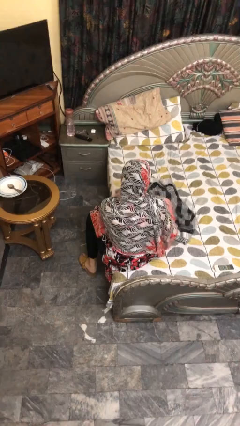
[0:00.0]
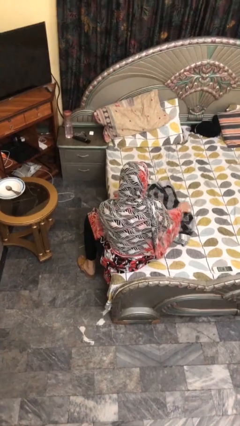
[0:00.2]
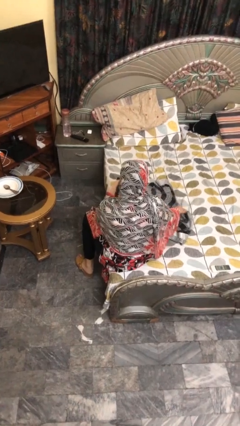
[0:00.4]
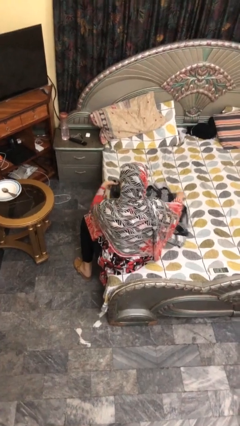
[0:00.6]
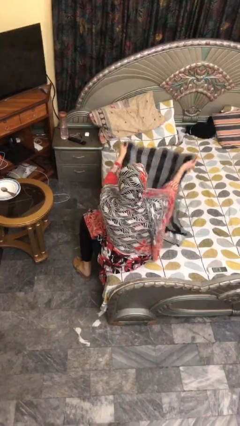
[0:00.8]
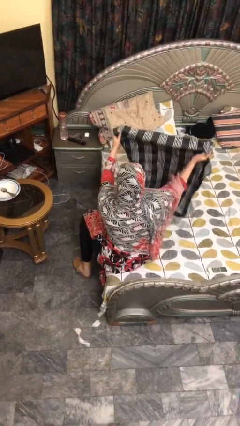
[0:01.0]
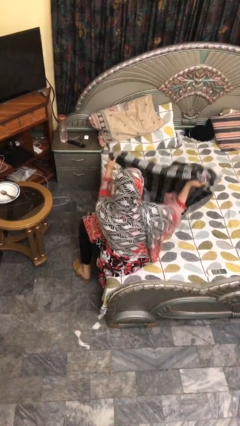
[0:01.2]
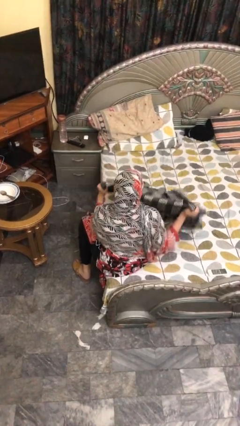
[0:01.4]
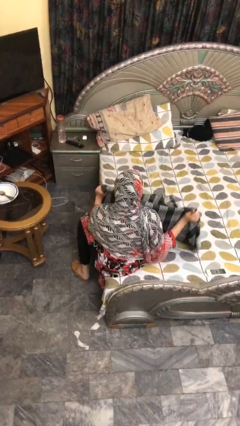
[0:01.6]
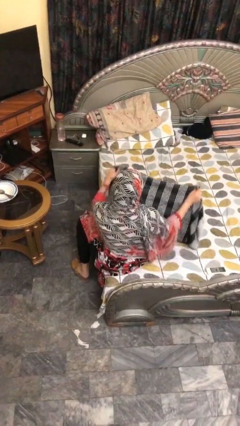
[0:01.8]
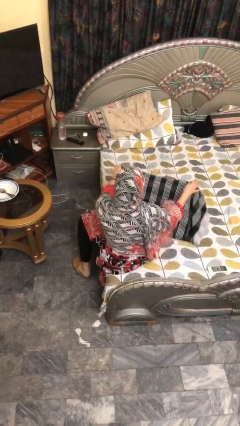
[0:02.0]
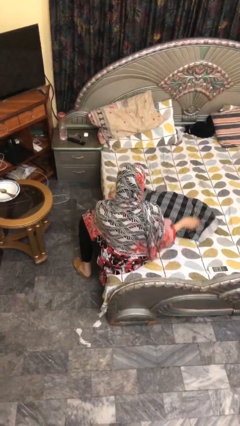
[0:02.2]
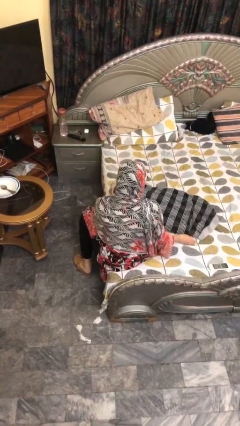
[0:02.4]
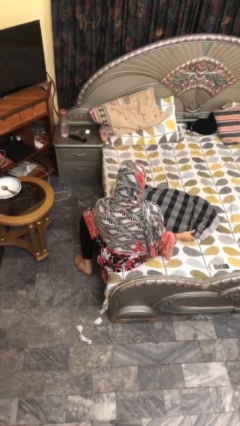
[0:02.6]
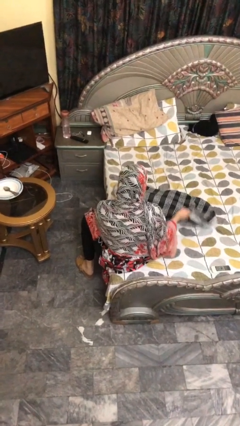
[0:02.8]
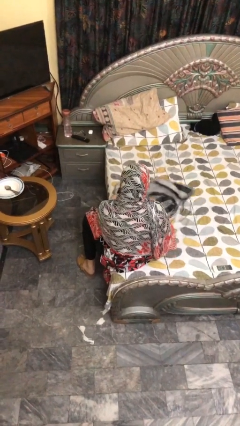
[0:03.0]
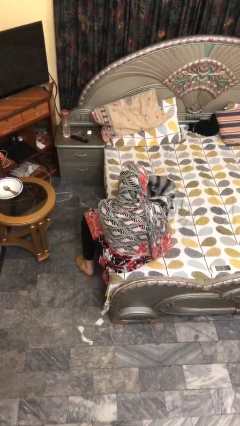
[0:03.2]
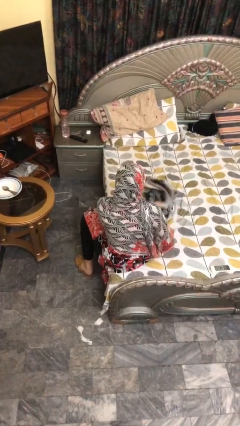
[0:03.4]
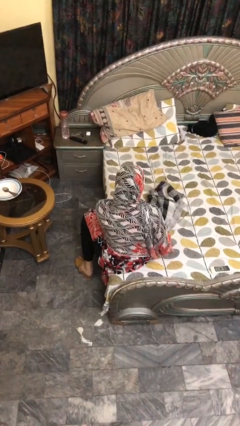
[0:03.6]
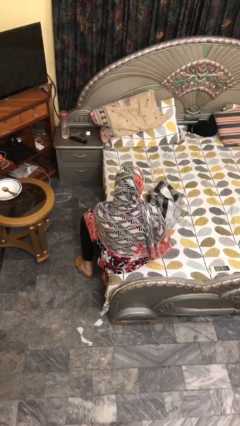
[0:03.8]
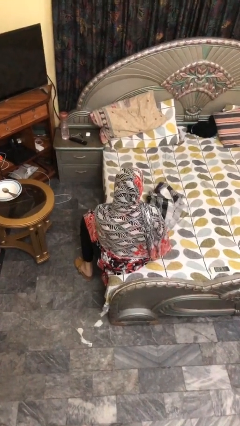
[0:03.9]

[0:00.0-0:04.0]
person folds blanket

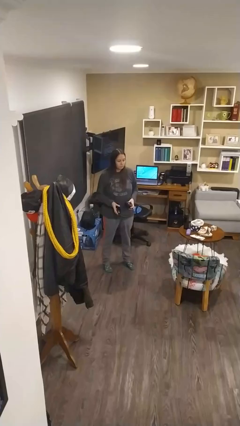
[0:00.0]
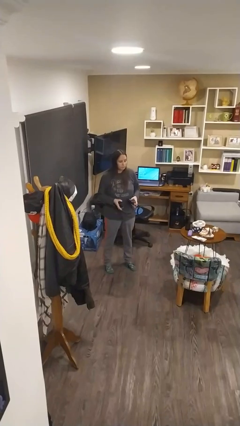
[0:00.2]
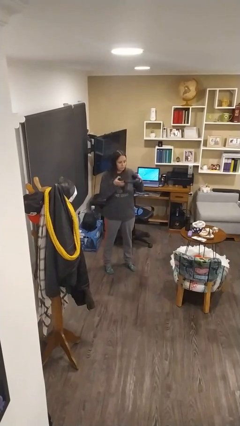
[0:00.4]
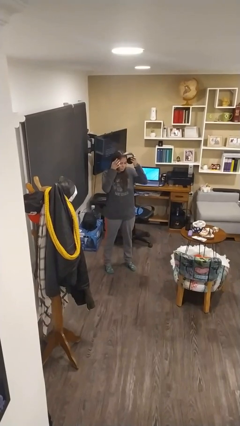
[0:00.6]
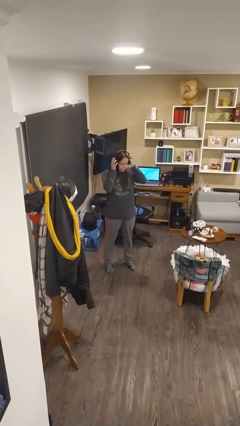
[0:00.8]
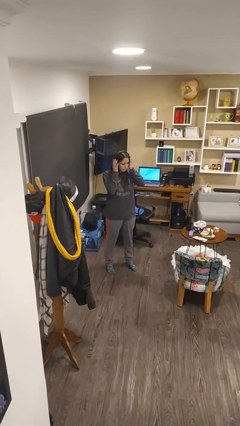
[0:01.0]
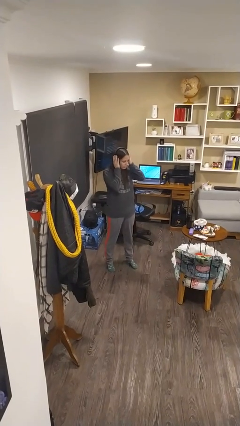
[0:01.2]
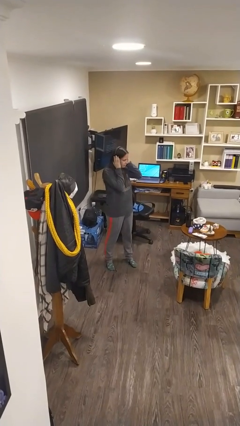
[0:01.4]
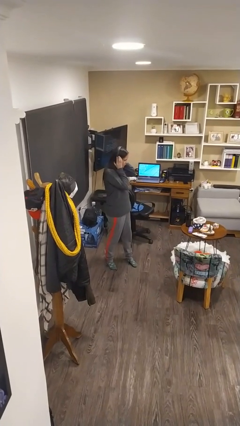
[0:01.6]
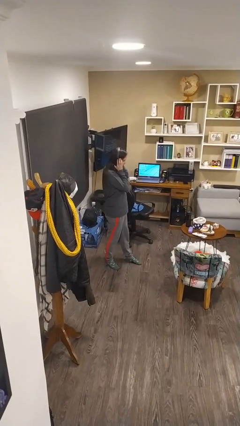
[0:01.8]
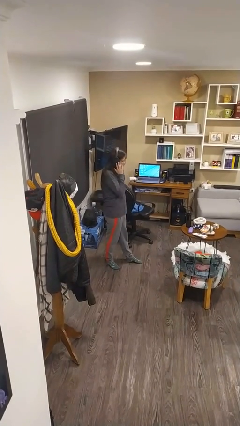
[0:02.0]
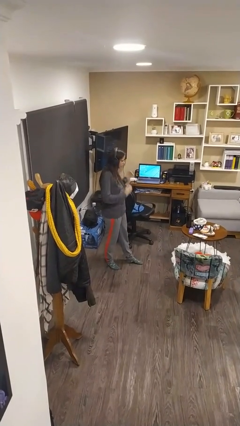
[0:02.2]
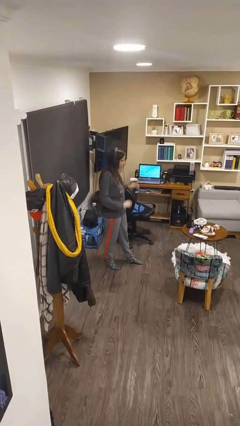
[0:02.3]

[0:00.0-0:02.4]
person puts on headphones

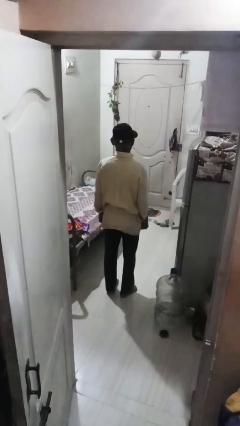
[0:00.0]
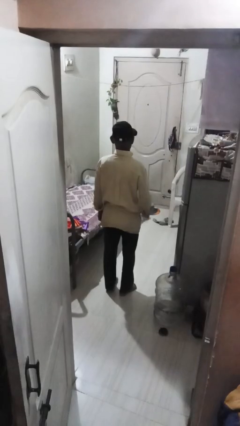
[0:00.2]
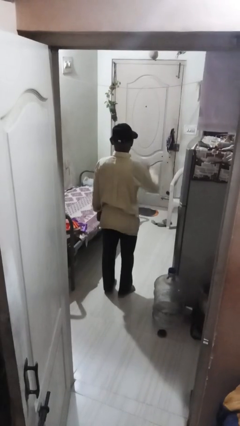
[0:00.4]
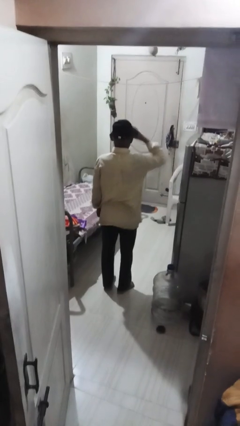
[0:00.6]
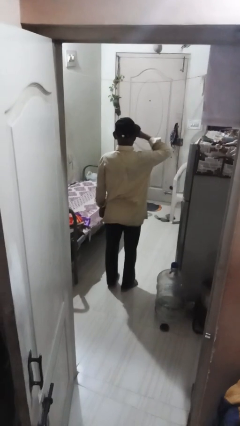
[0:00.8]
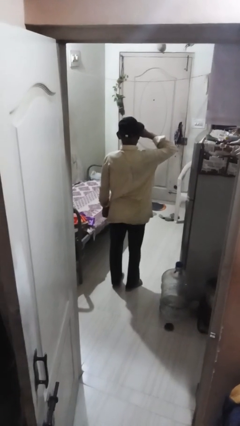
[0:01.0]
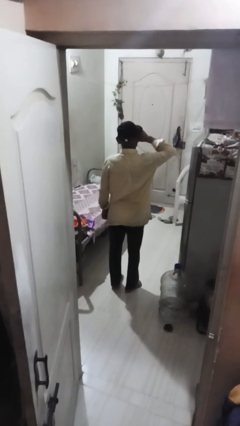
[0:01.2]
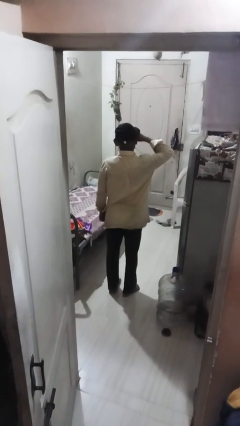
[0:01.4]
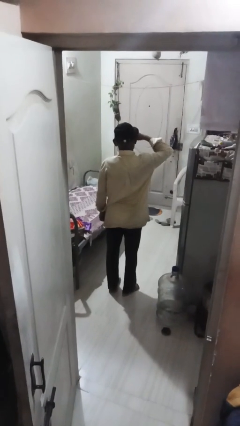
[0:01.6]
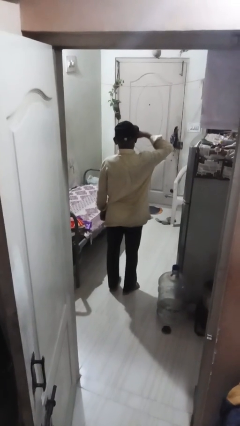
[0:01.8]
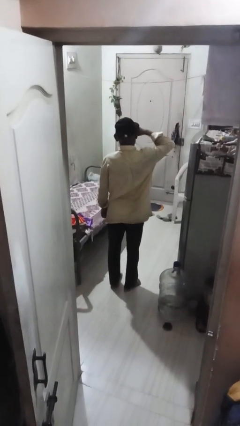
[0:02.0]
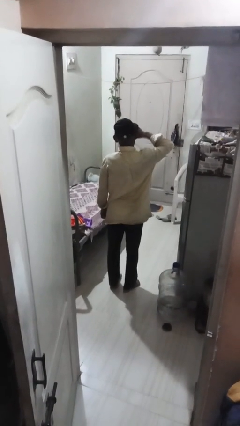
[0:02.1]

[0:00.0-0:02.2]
person rubs eyes

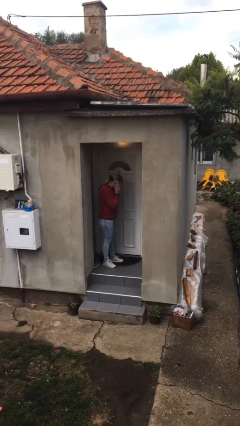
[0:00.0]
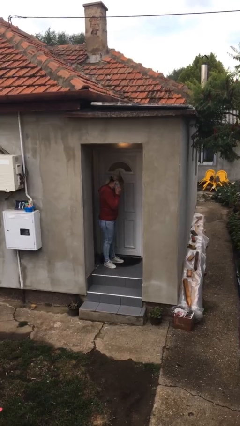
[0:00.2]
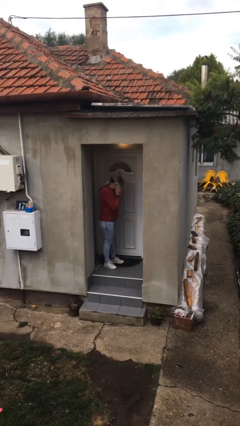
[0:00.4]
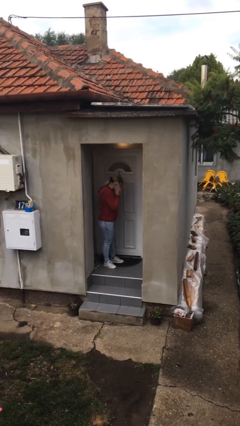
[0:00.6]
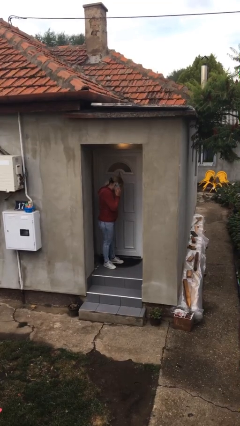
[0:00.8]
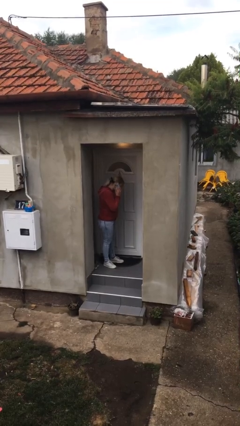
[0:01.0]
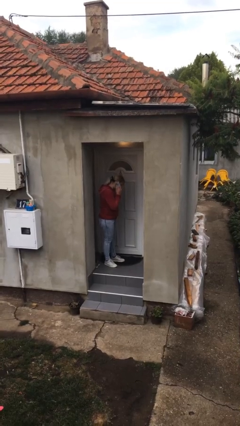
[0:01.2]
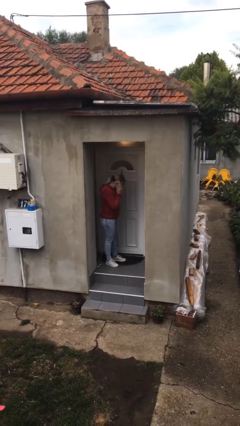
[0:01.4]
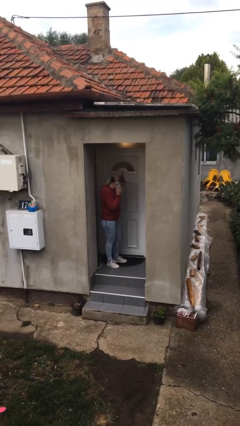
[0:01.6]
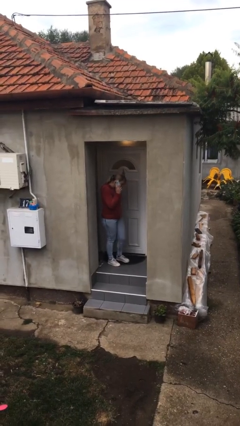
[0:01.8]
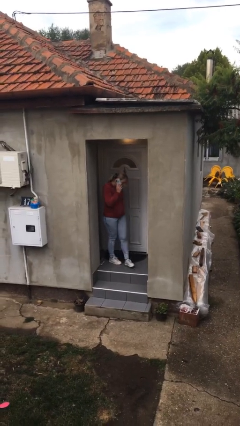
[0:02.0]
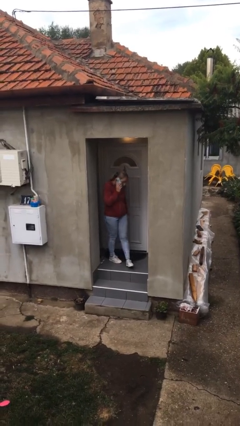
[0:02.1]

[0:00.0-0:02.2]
person closes facility door

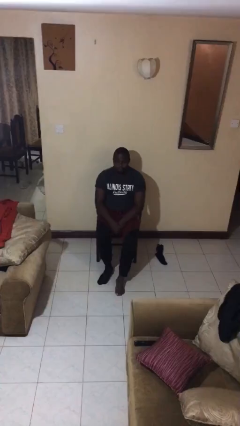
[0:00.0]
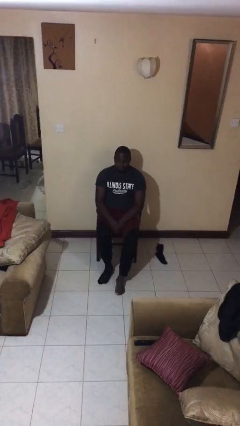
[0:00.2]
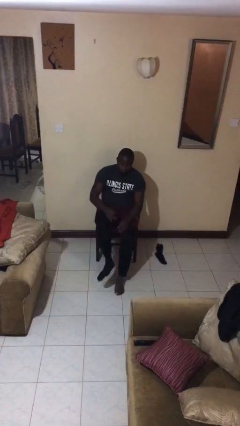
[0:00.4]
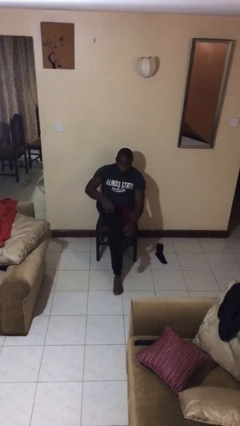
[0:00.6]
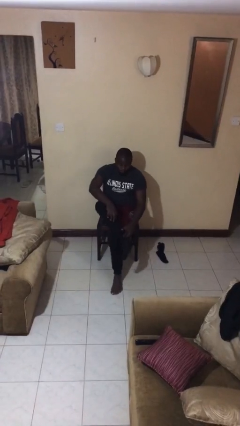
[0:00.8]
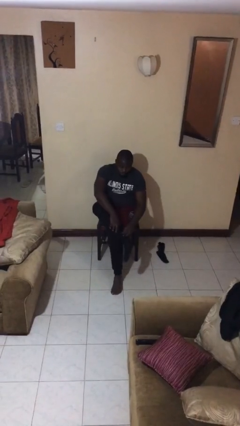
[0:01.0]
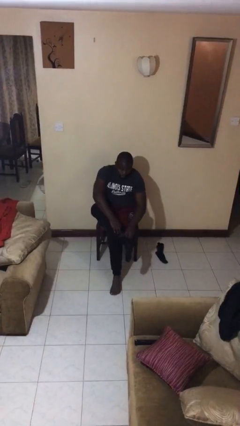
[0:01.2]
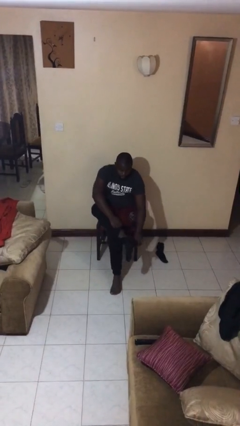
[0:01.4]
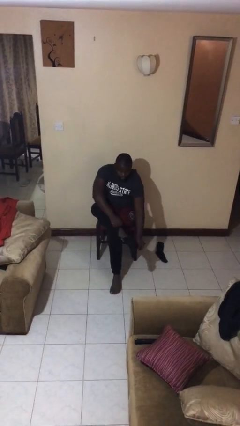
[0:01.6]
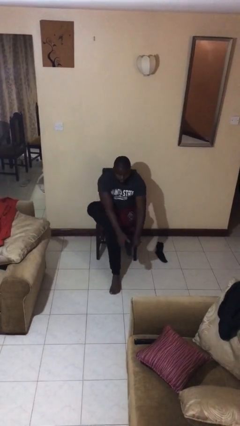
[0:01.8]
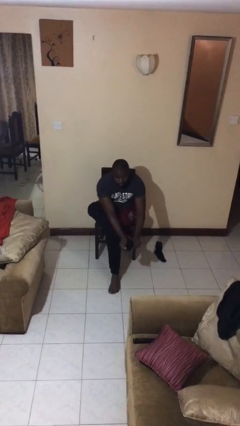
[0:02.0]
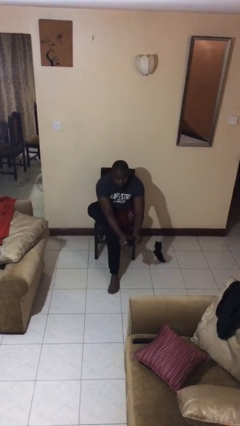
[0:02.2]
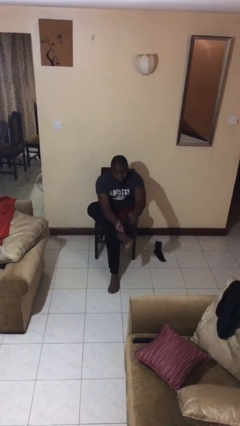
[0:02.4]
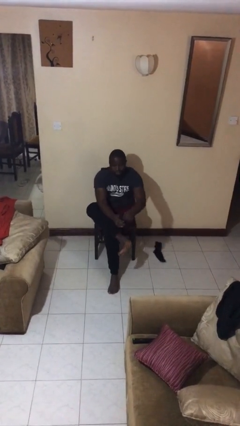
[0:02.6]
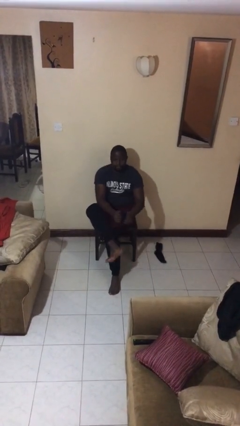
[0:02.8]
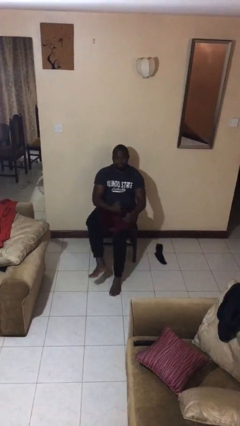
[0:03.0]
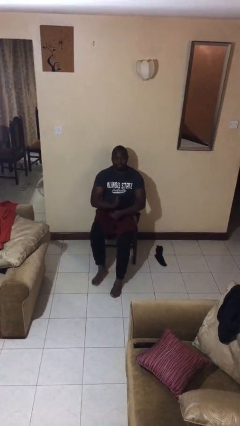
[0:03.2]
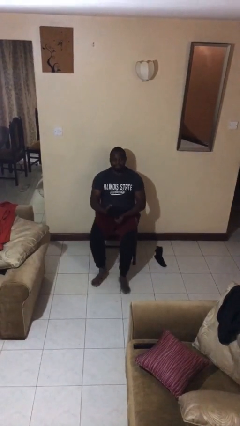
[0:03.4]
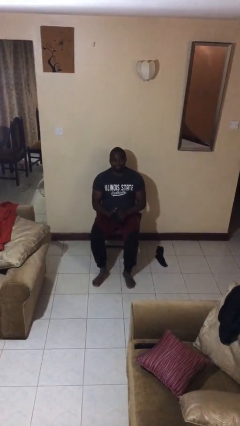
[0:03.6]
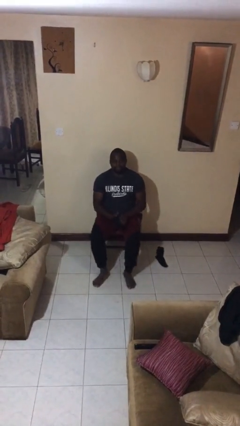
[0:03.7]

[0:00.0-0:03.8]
person takes off socks

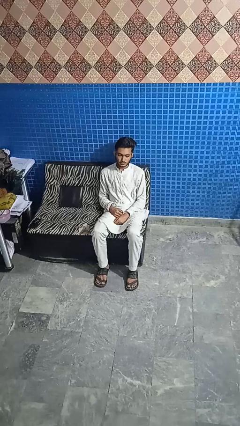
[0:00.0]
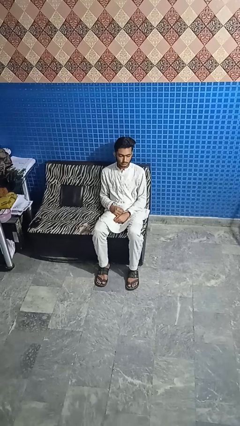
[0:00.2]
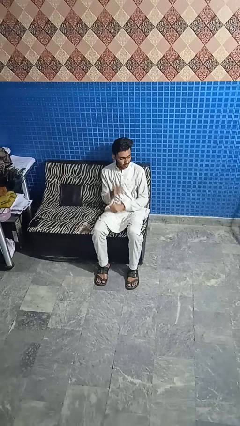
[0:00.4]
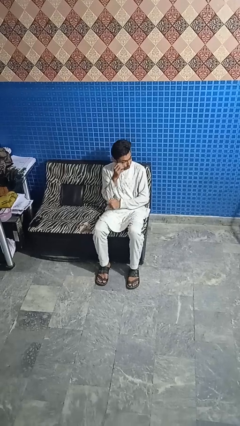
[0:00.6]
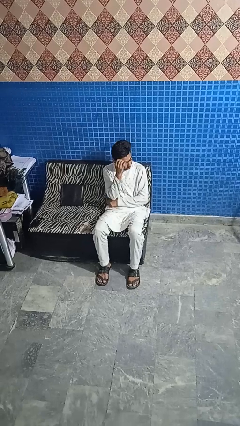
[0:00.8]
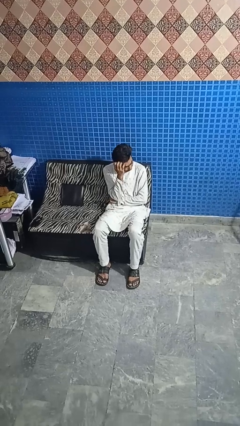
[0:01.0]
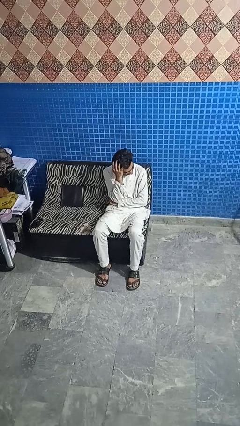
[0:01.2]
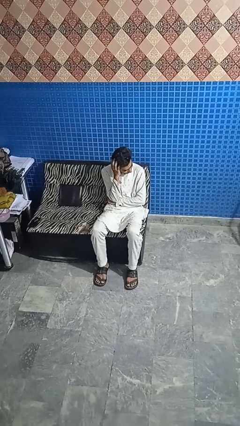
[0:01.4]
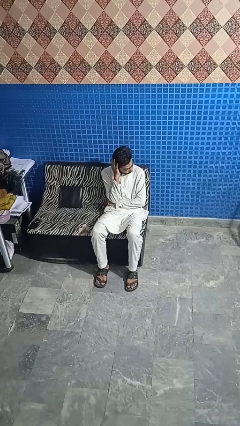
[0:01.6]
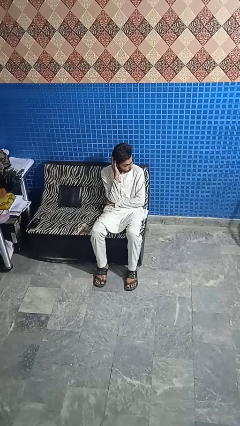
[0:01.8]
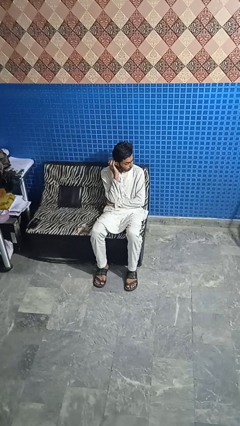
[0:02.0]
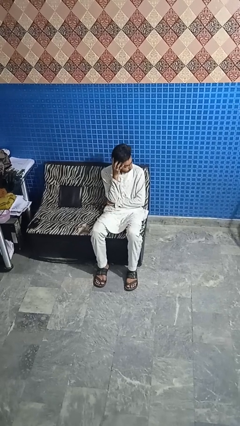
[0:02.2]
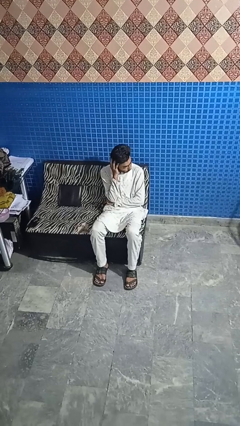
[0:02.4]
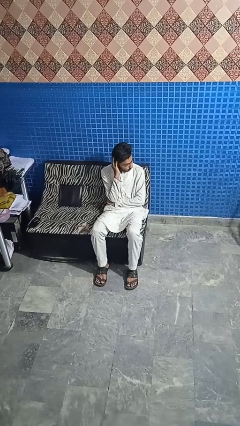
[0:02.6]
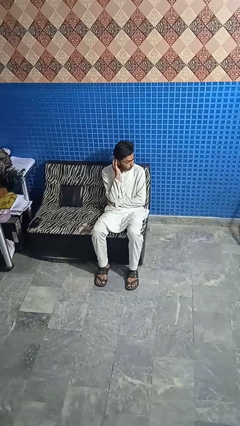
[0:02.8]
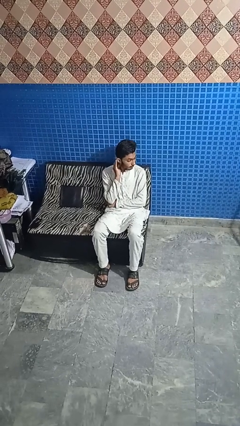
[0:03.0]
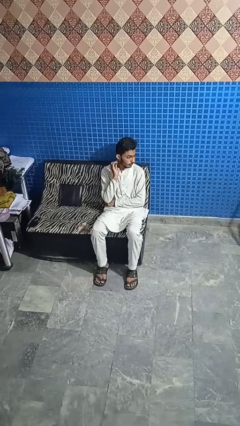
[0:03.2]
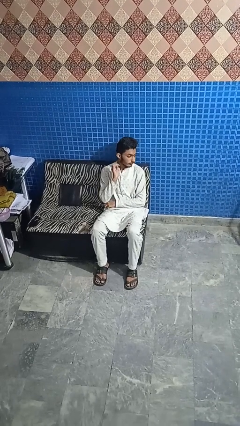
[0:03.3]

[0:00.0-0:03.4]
person strokes hair
